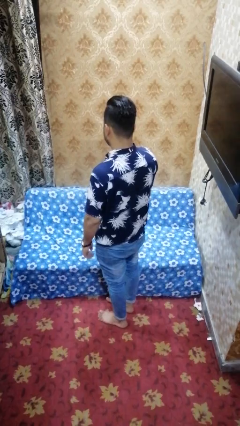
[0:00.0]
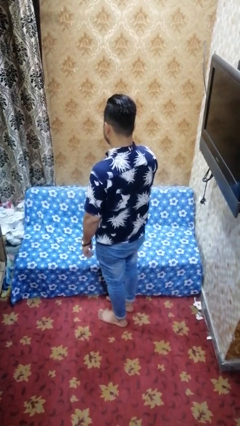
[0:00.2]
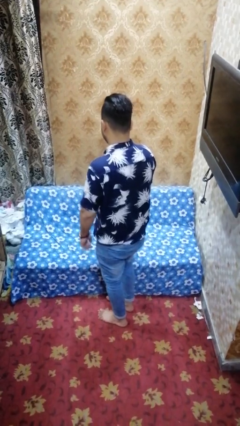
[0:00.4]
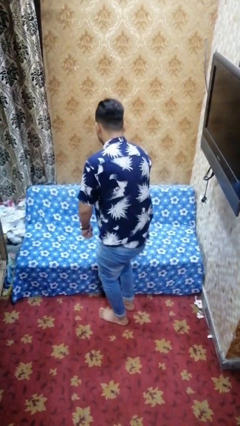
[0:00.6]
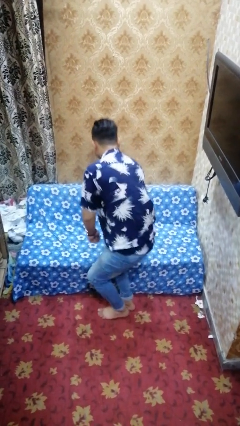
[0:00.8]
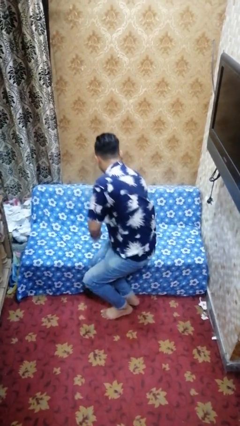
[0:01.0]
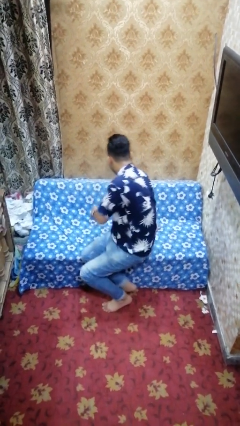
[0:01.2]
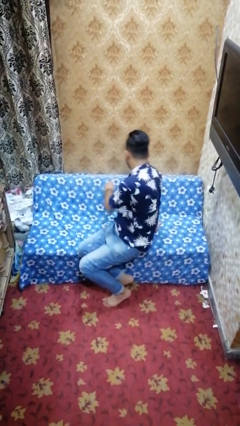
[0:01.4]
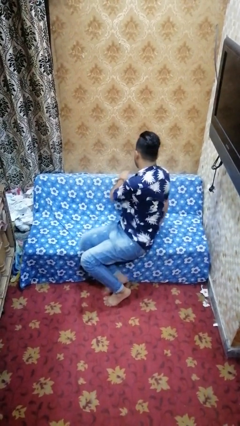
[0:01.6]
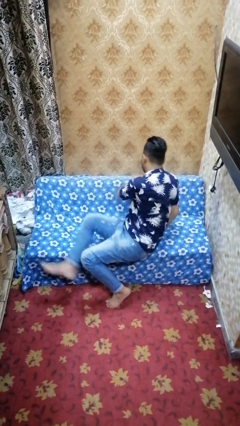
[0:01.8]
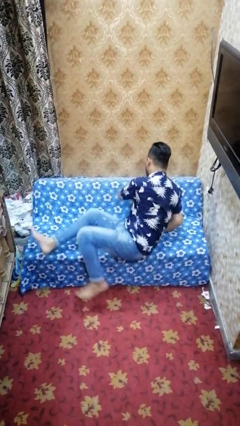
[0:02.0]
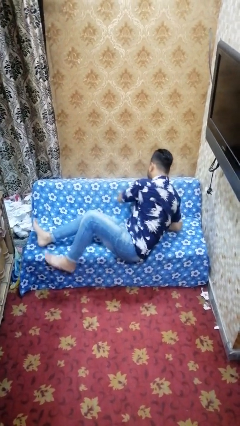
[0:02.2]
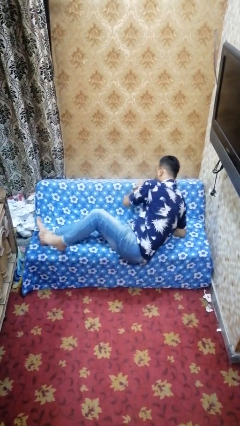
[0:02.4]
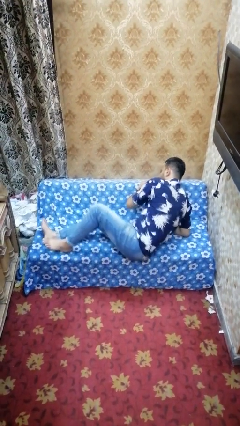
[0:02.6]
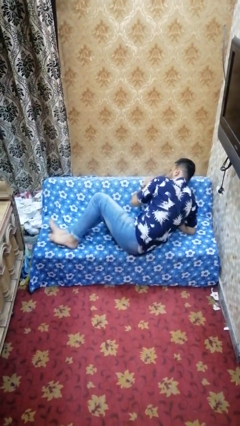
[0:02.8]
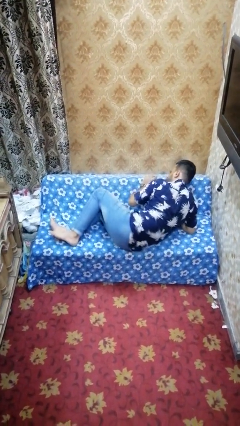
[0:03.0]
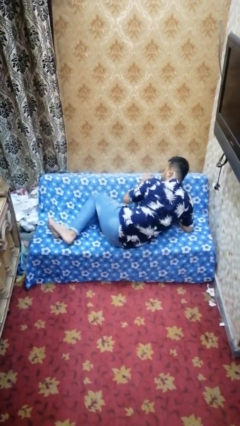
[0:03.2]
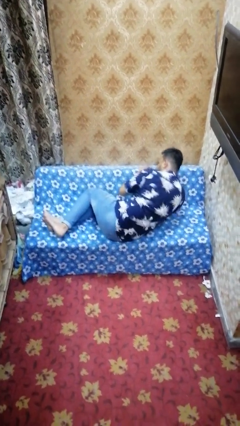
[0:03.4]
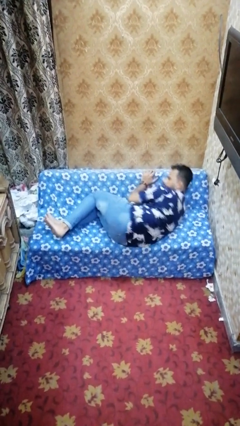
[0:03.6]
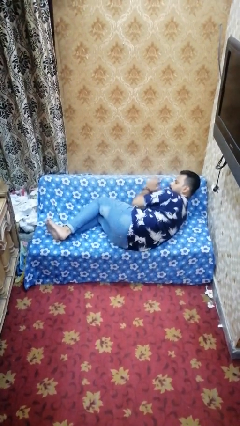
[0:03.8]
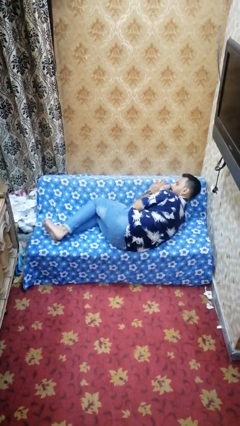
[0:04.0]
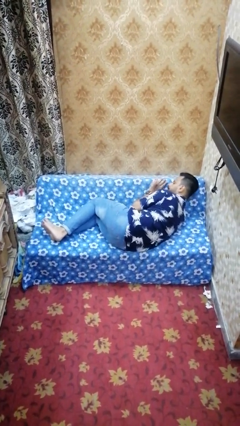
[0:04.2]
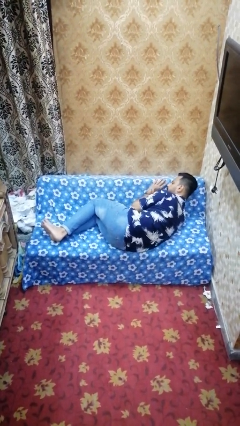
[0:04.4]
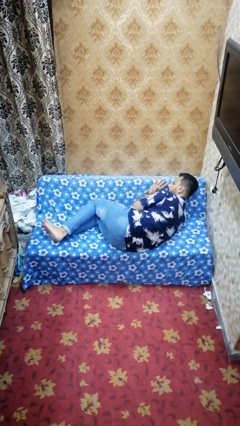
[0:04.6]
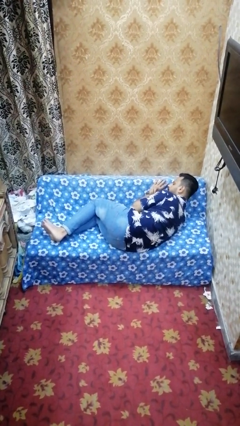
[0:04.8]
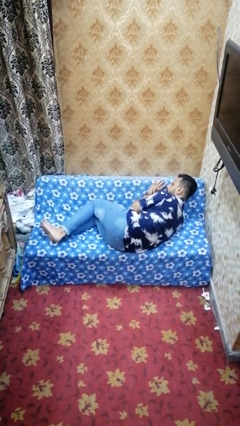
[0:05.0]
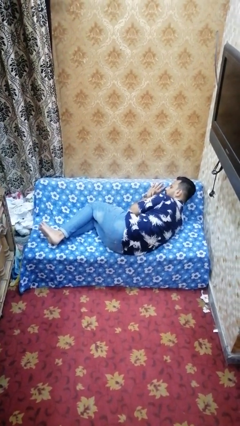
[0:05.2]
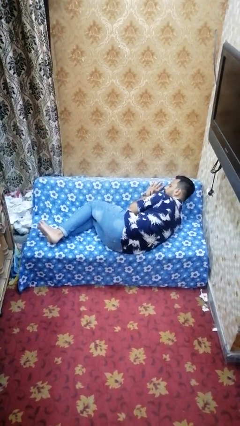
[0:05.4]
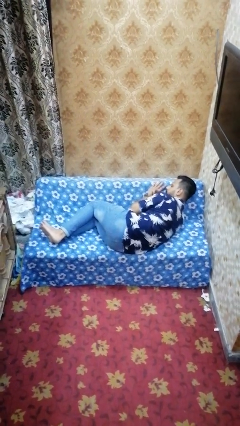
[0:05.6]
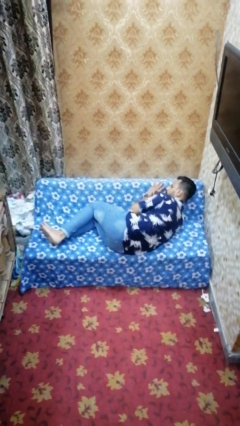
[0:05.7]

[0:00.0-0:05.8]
person lies down on couch

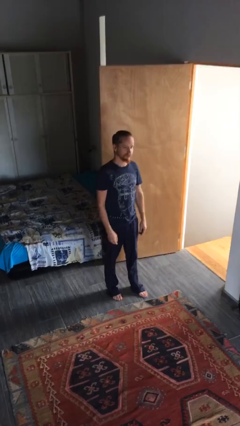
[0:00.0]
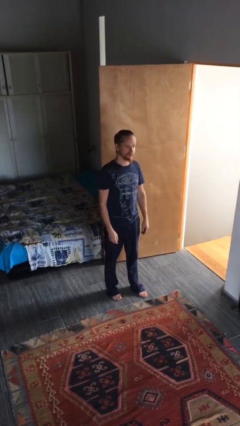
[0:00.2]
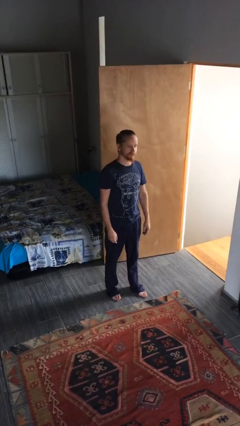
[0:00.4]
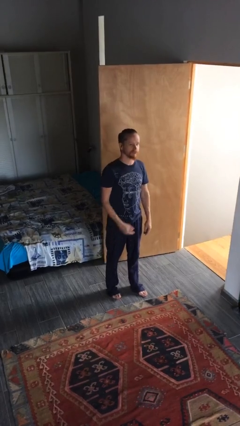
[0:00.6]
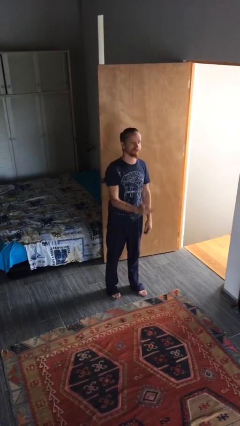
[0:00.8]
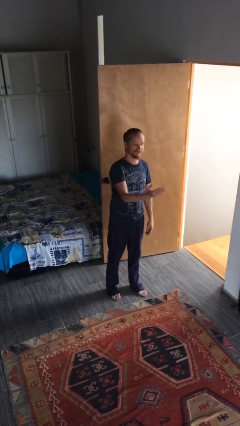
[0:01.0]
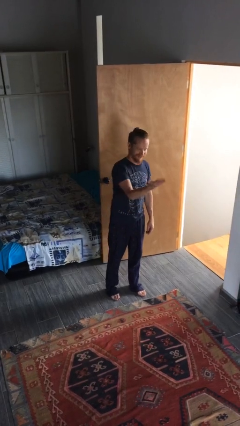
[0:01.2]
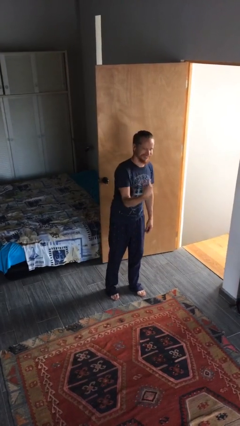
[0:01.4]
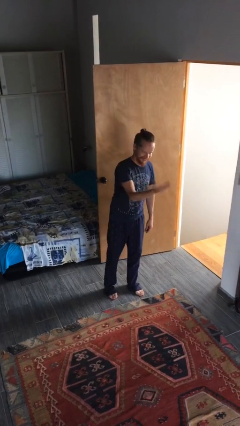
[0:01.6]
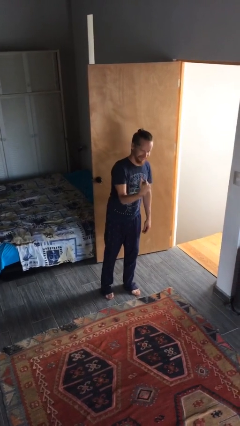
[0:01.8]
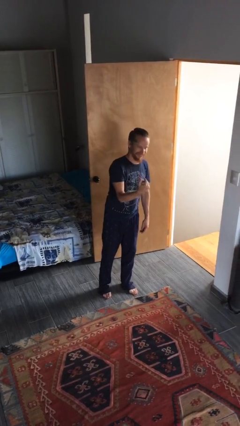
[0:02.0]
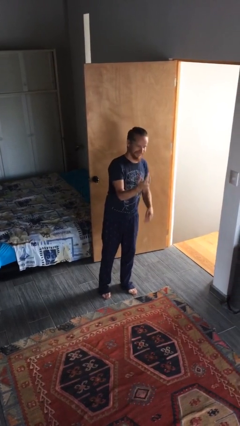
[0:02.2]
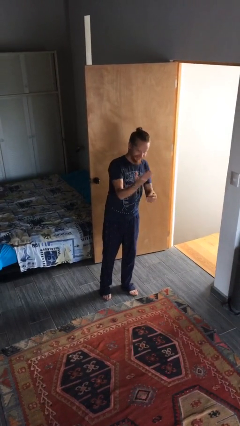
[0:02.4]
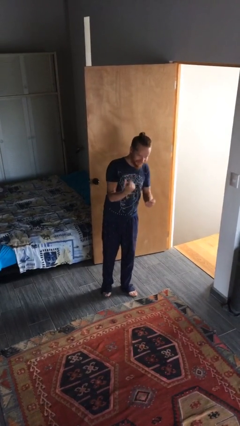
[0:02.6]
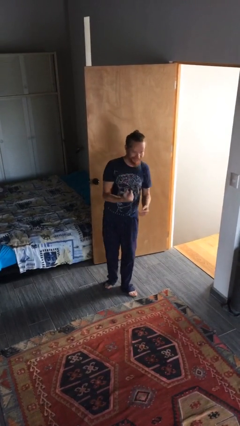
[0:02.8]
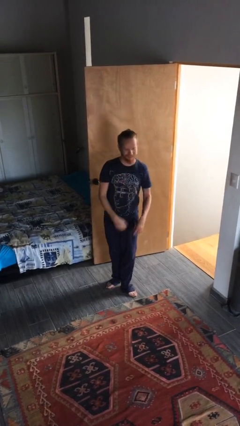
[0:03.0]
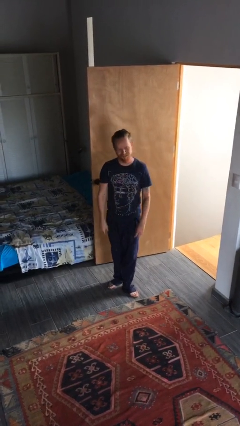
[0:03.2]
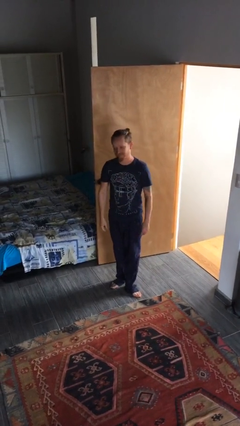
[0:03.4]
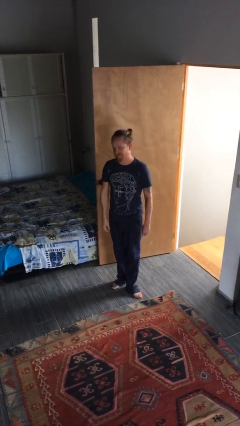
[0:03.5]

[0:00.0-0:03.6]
person gestures come here

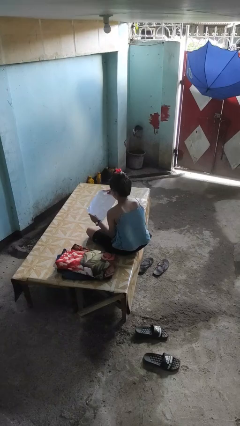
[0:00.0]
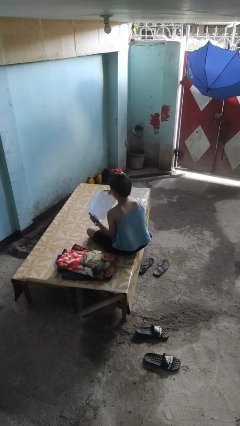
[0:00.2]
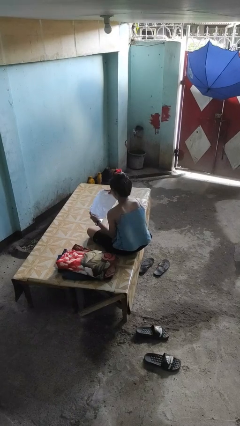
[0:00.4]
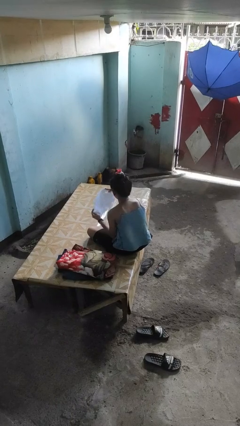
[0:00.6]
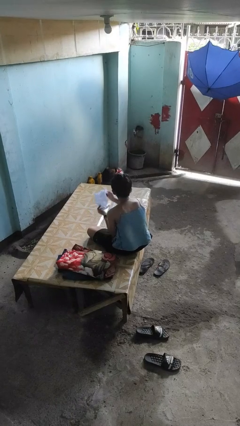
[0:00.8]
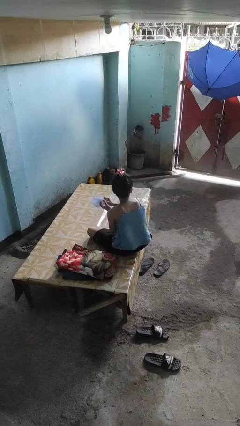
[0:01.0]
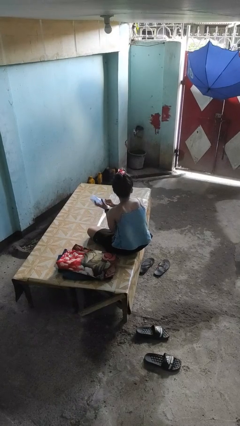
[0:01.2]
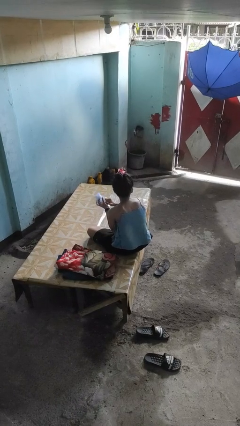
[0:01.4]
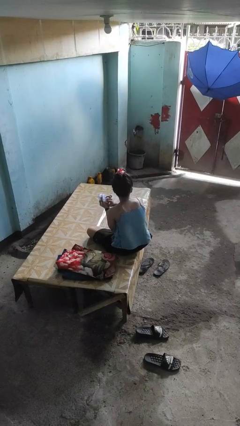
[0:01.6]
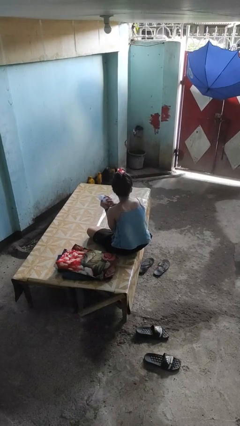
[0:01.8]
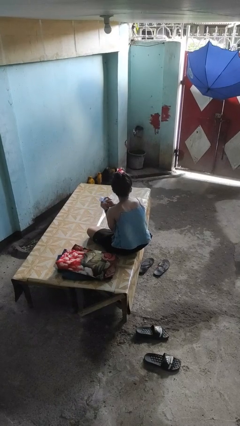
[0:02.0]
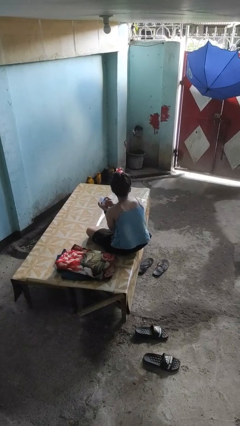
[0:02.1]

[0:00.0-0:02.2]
person crumples paper

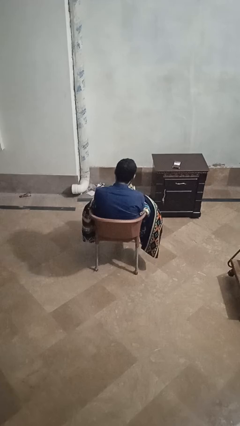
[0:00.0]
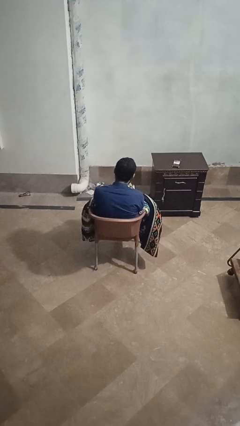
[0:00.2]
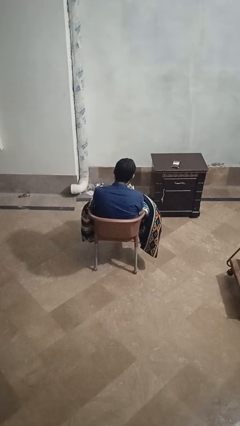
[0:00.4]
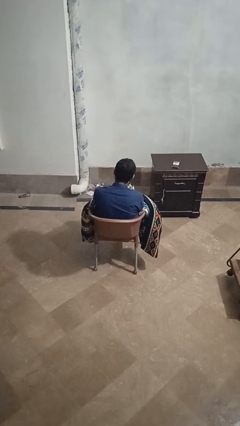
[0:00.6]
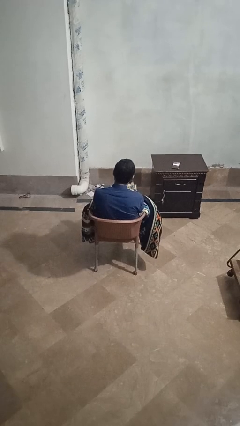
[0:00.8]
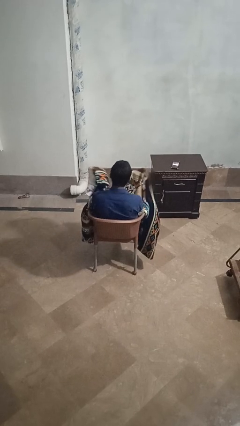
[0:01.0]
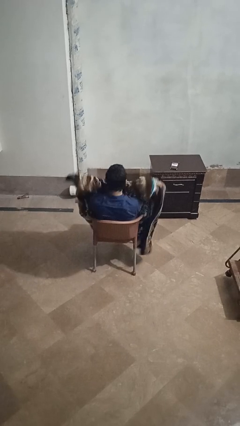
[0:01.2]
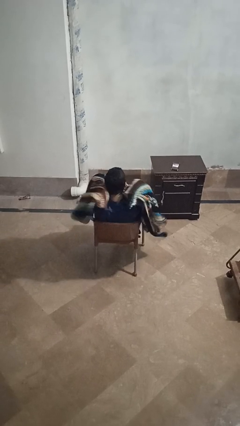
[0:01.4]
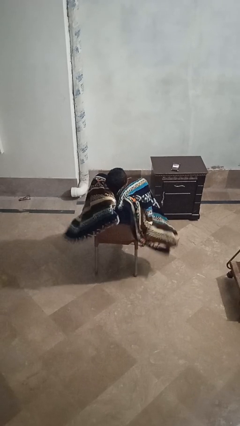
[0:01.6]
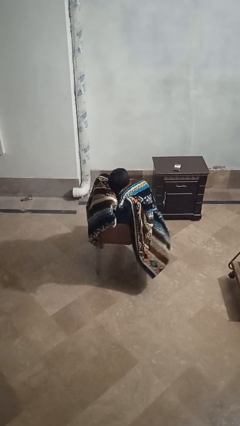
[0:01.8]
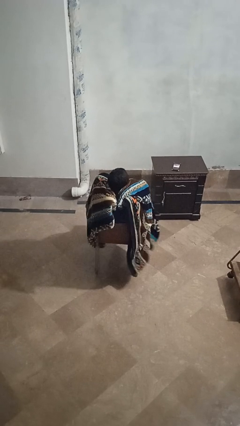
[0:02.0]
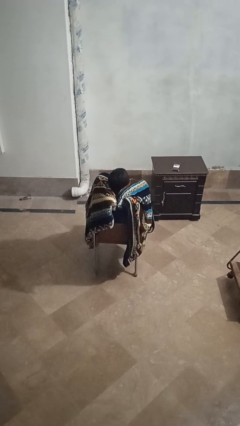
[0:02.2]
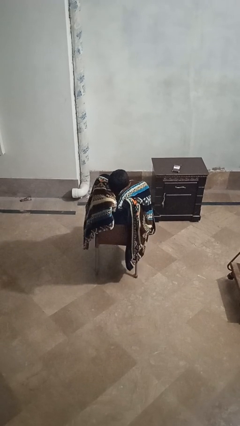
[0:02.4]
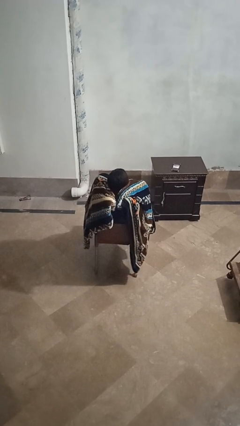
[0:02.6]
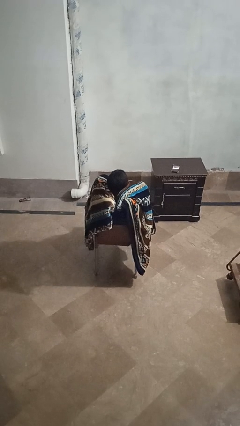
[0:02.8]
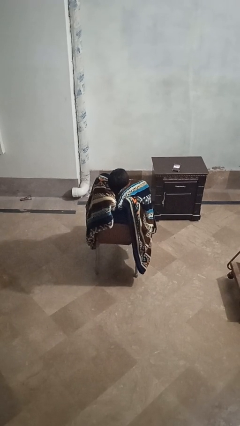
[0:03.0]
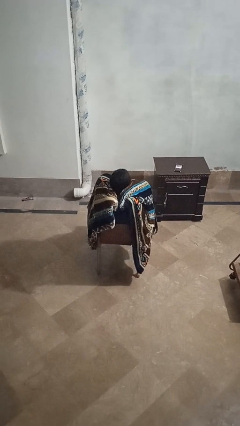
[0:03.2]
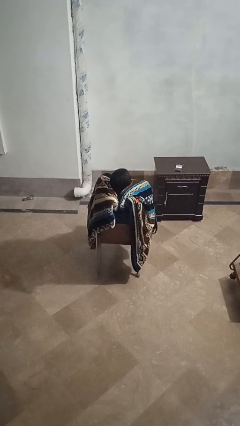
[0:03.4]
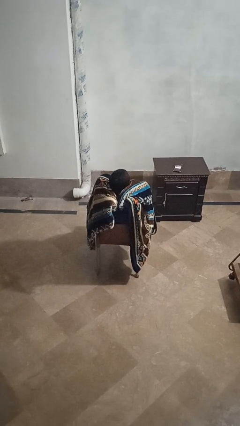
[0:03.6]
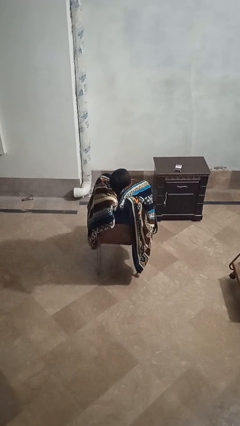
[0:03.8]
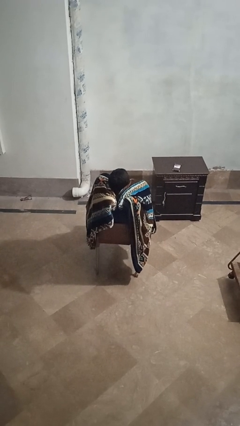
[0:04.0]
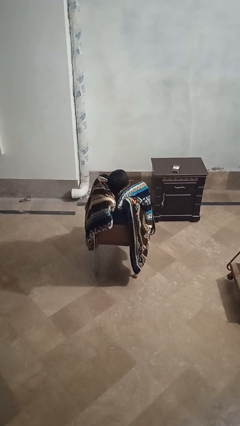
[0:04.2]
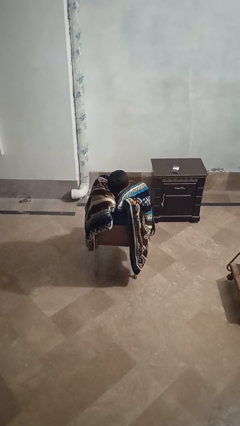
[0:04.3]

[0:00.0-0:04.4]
person covers with blanket

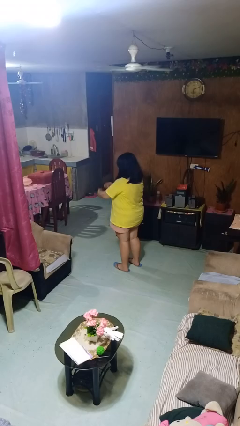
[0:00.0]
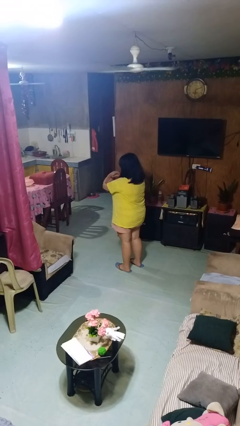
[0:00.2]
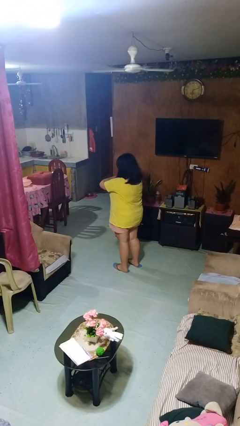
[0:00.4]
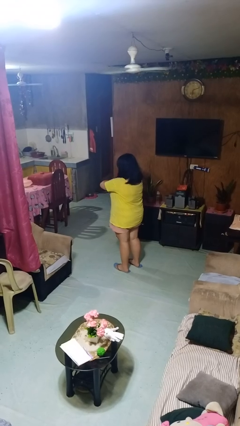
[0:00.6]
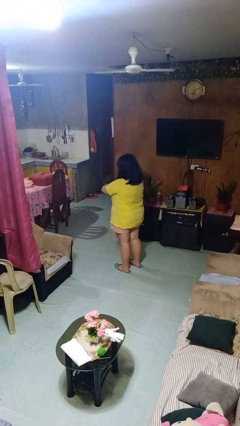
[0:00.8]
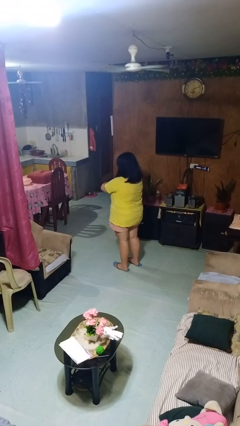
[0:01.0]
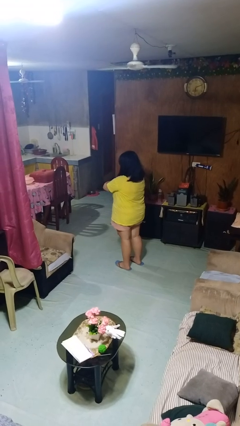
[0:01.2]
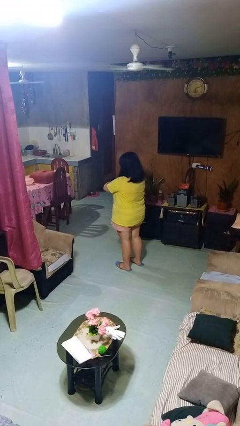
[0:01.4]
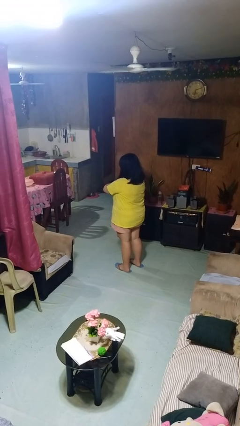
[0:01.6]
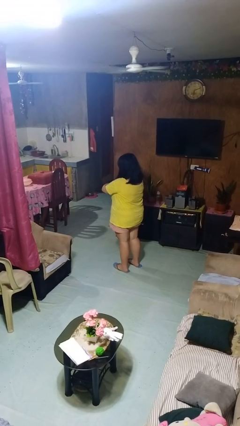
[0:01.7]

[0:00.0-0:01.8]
person crosses arms
